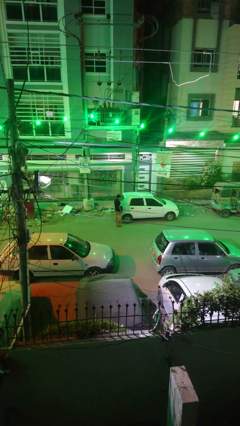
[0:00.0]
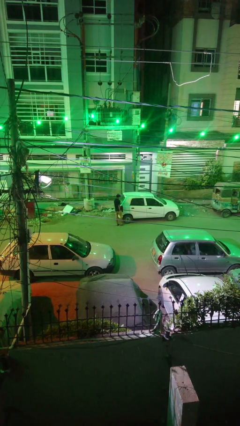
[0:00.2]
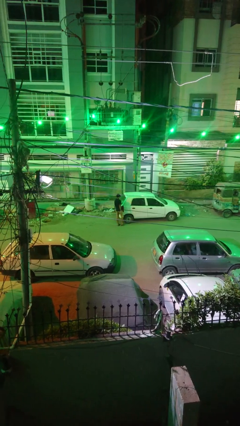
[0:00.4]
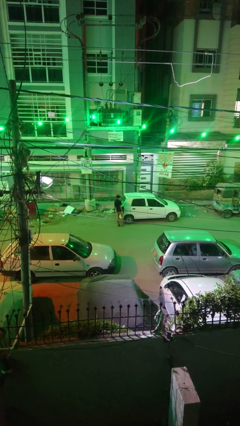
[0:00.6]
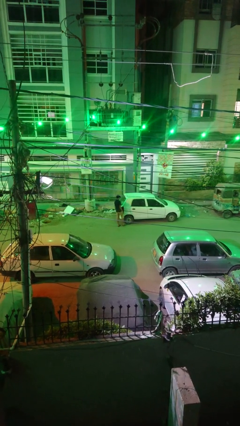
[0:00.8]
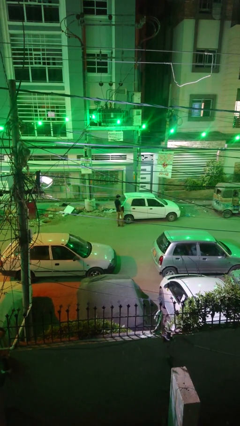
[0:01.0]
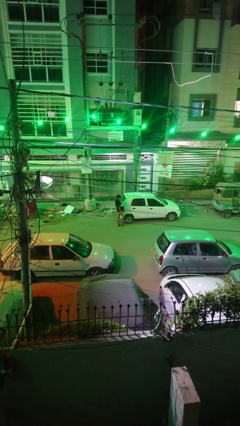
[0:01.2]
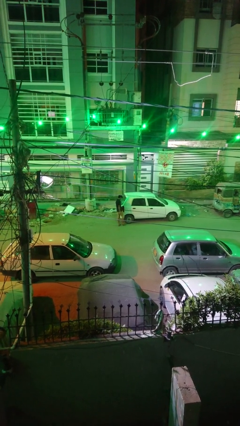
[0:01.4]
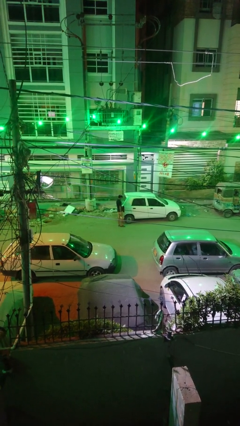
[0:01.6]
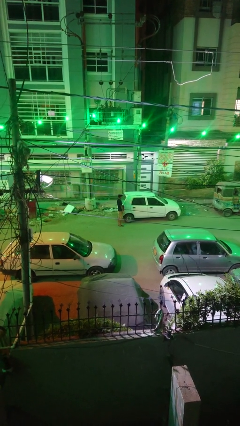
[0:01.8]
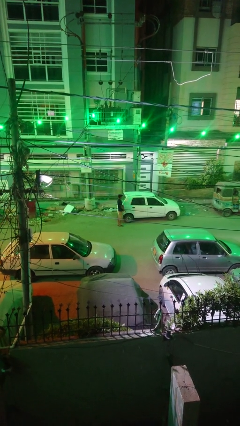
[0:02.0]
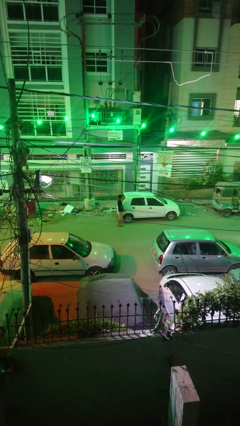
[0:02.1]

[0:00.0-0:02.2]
person kicks car tires

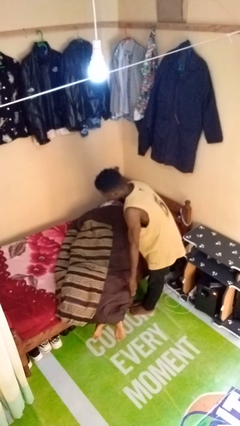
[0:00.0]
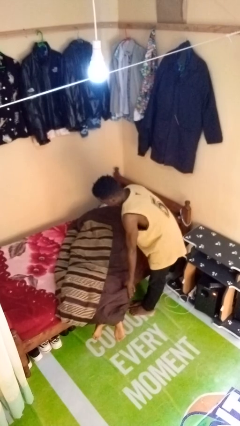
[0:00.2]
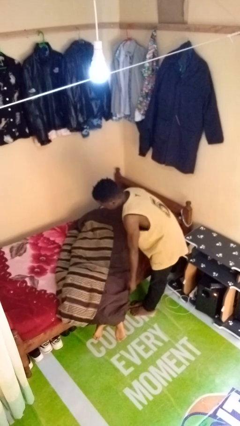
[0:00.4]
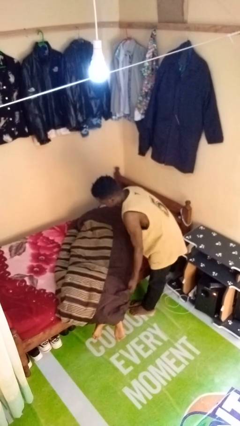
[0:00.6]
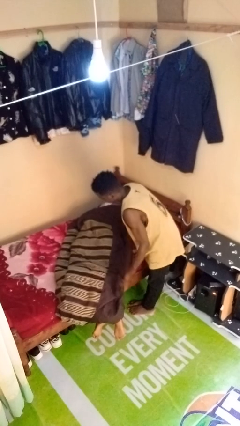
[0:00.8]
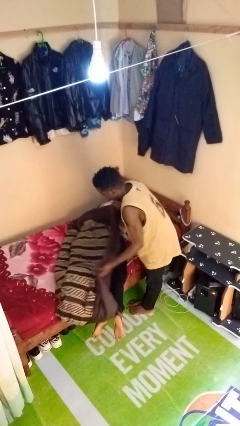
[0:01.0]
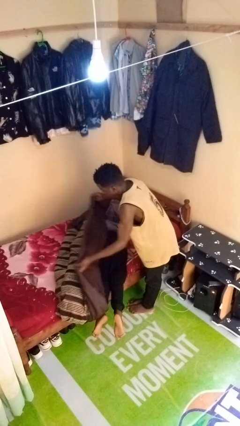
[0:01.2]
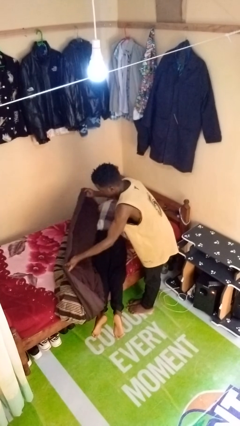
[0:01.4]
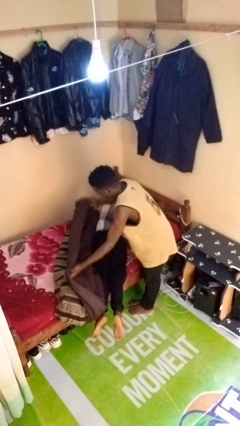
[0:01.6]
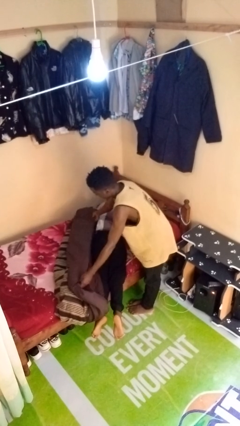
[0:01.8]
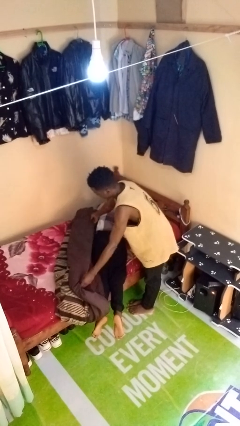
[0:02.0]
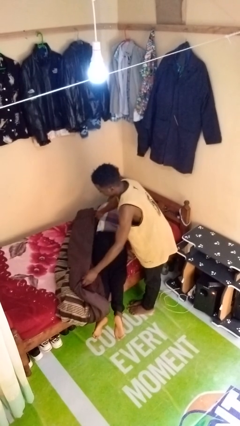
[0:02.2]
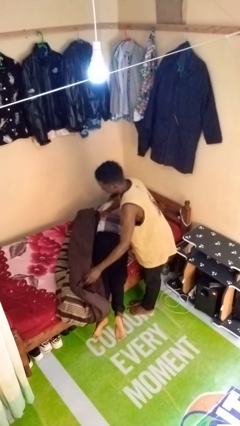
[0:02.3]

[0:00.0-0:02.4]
person uncovers friend with blanket

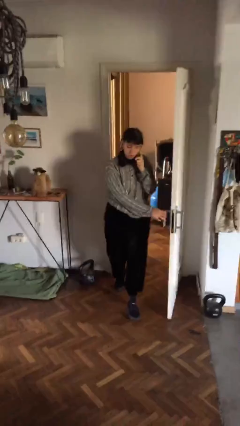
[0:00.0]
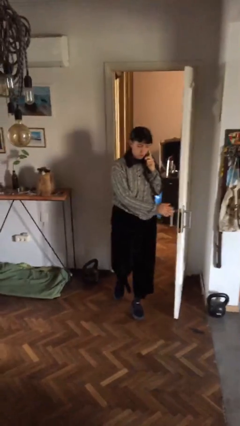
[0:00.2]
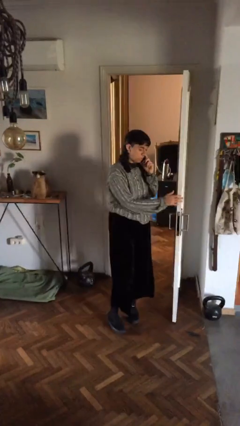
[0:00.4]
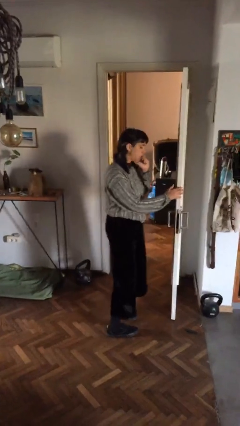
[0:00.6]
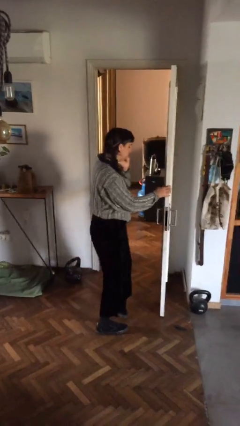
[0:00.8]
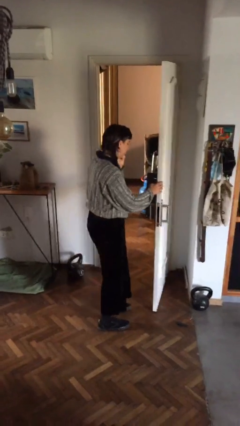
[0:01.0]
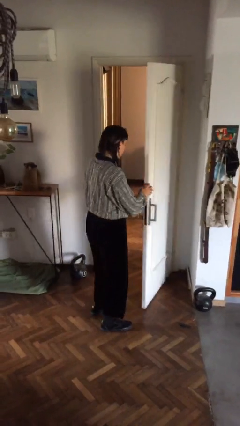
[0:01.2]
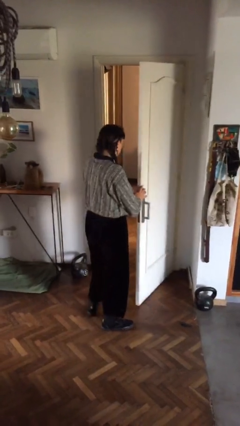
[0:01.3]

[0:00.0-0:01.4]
person enters scene through structure

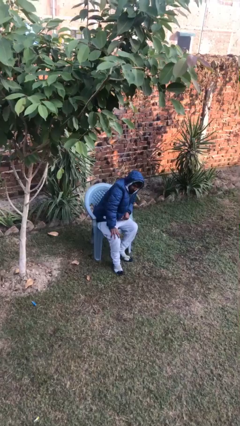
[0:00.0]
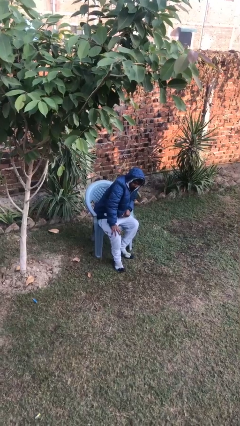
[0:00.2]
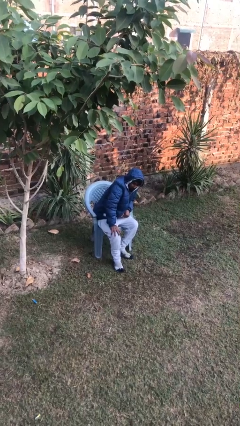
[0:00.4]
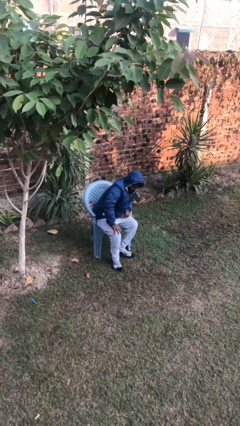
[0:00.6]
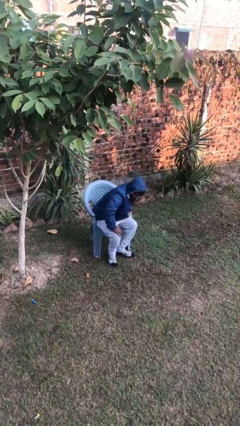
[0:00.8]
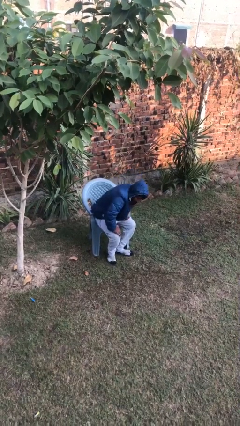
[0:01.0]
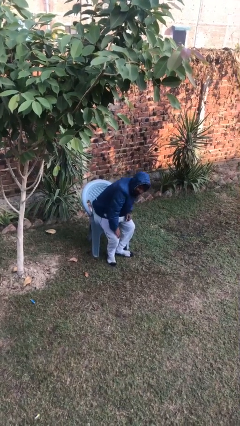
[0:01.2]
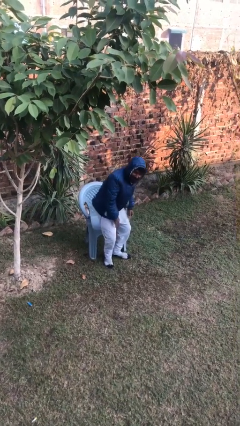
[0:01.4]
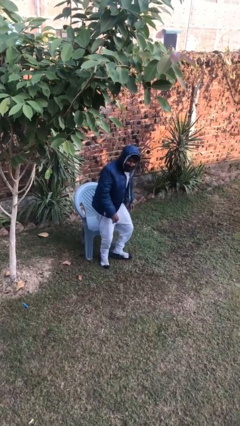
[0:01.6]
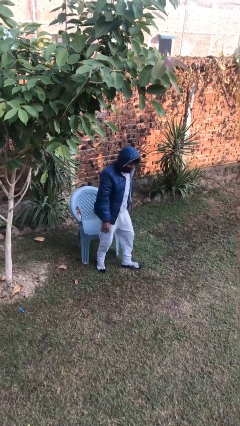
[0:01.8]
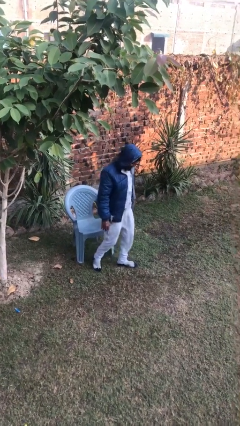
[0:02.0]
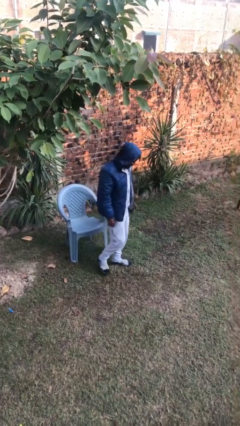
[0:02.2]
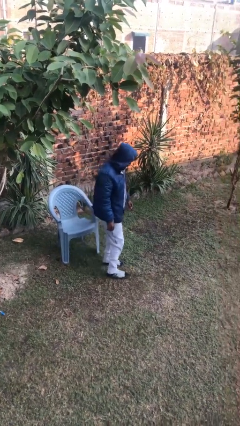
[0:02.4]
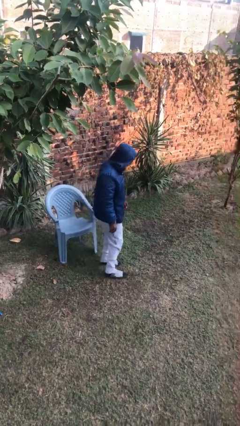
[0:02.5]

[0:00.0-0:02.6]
person stands up

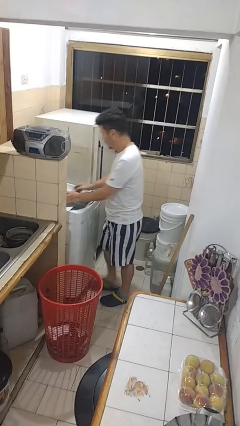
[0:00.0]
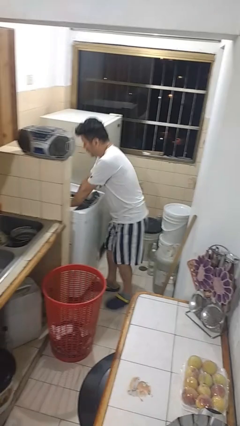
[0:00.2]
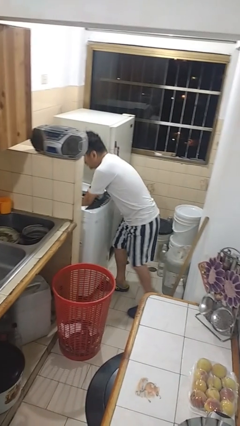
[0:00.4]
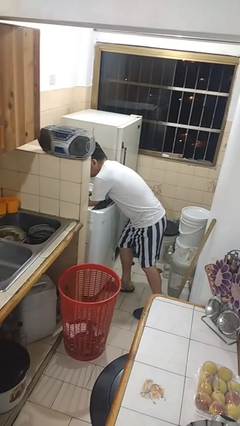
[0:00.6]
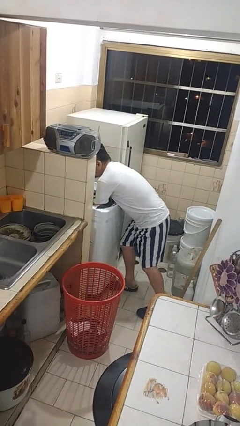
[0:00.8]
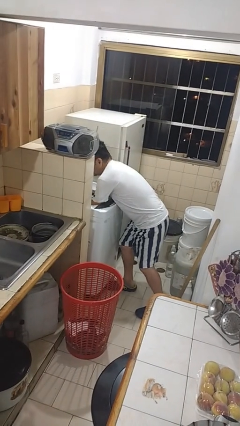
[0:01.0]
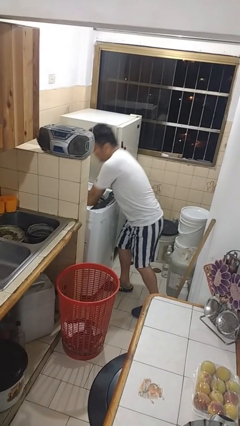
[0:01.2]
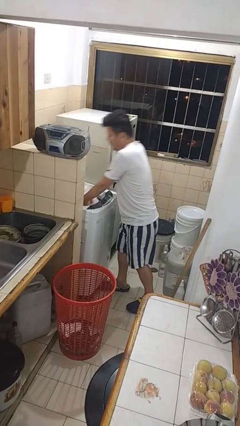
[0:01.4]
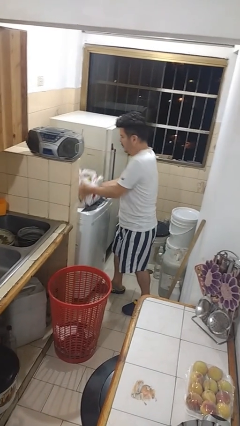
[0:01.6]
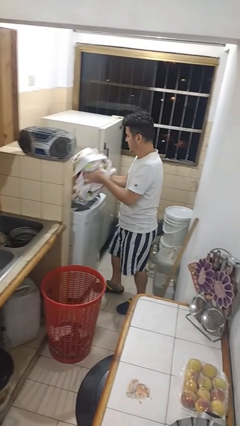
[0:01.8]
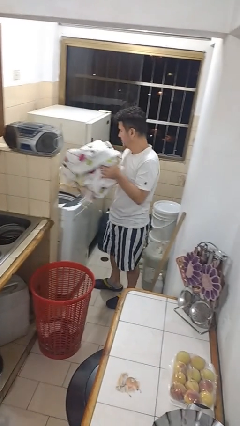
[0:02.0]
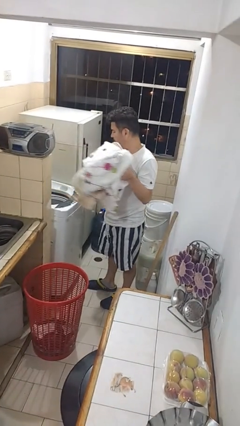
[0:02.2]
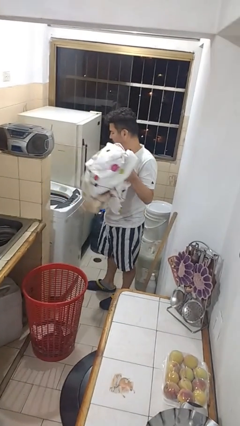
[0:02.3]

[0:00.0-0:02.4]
person unloads clotheswasher

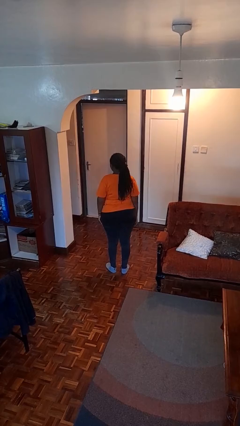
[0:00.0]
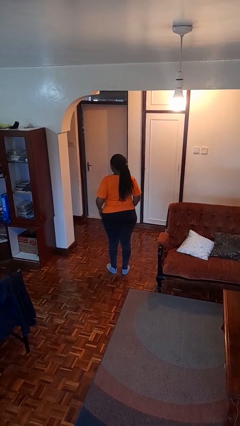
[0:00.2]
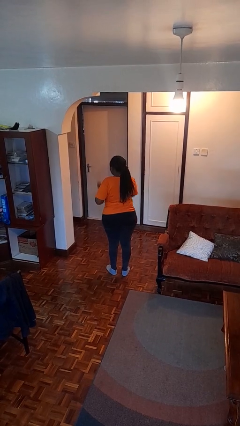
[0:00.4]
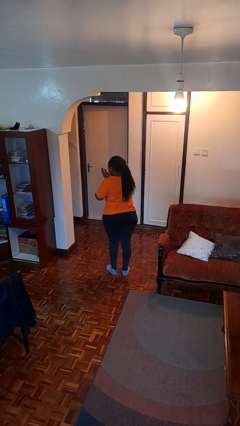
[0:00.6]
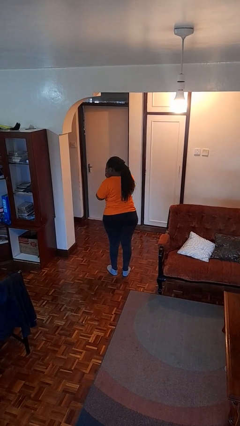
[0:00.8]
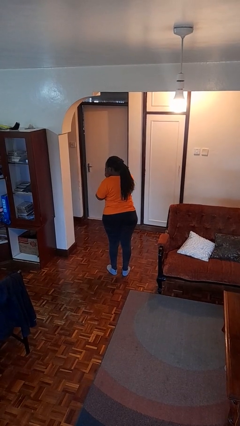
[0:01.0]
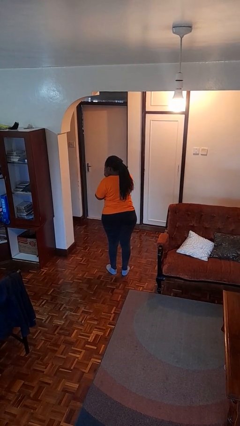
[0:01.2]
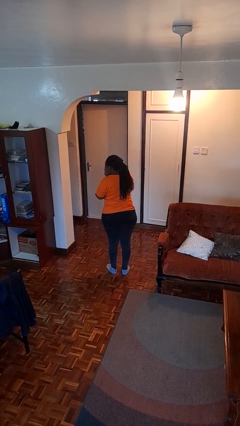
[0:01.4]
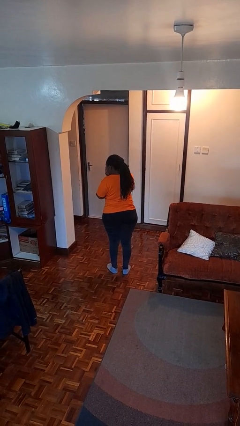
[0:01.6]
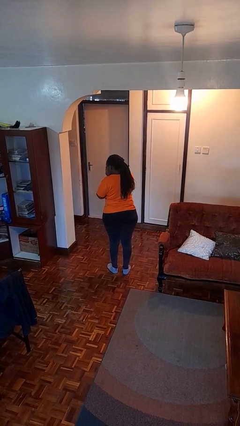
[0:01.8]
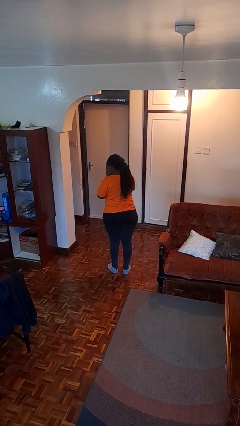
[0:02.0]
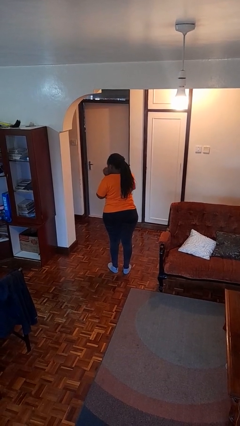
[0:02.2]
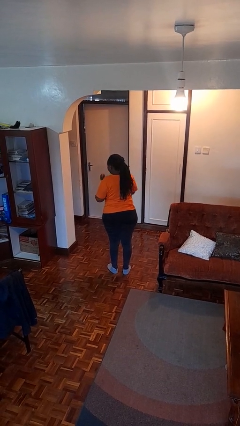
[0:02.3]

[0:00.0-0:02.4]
person sneezes into hand

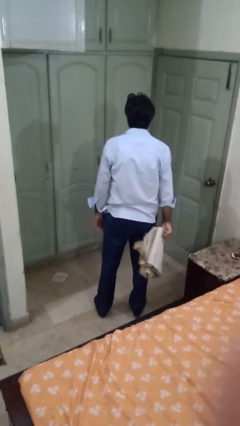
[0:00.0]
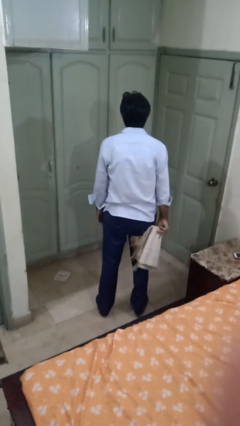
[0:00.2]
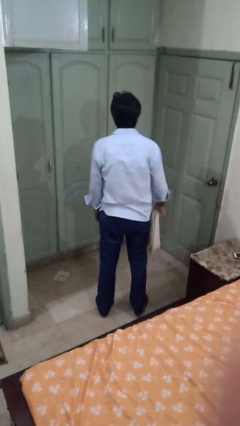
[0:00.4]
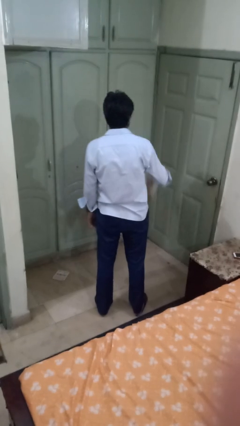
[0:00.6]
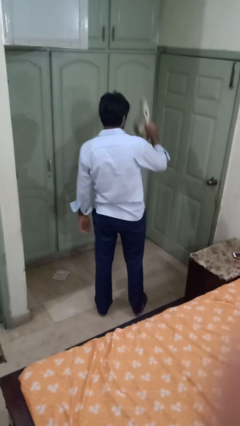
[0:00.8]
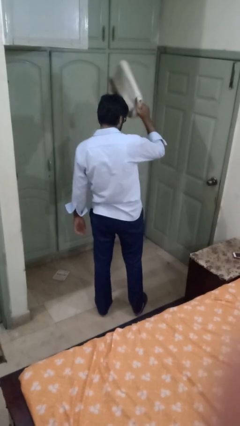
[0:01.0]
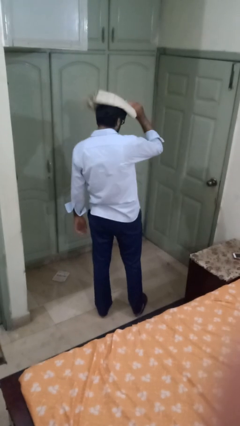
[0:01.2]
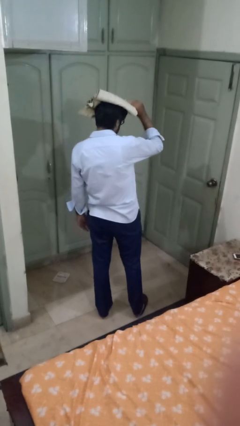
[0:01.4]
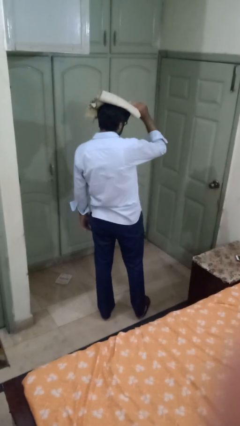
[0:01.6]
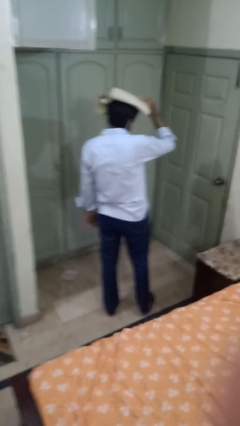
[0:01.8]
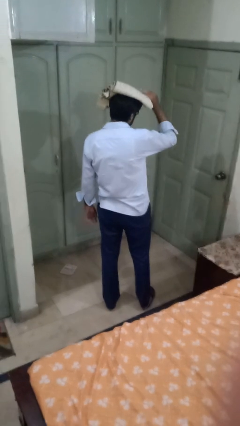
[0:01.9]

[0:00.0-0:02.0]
person holds object above head

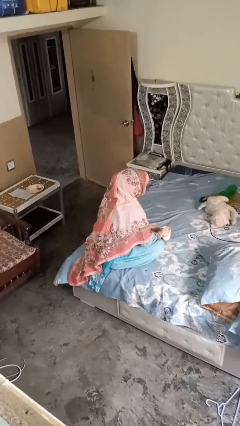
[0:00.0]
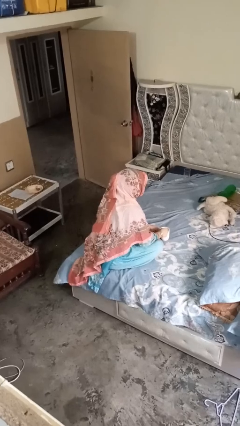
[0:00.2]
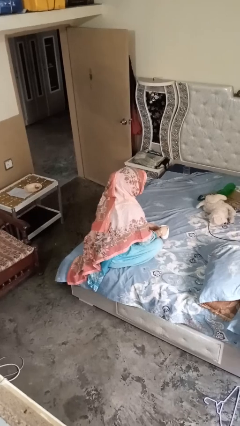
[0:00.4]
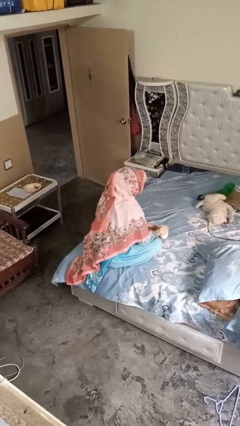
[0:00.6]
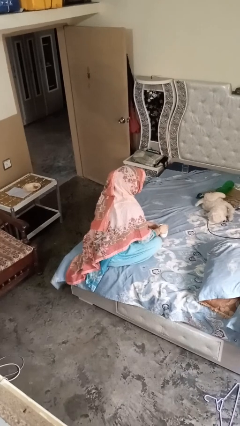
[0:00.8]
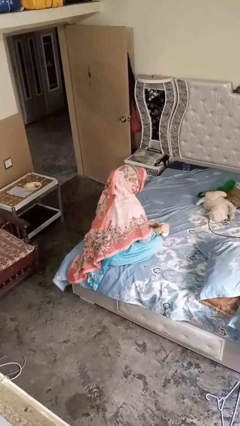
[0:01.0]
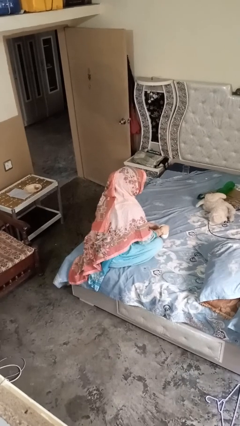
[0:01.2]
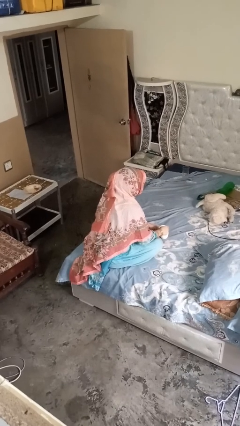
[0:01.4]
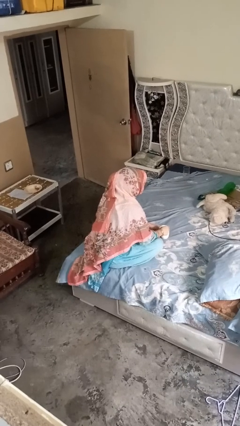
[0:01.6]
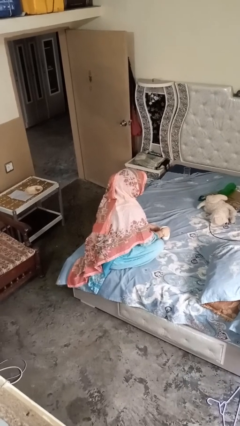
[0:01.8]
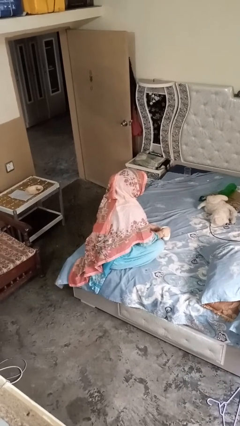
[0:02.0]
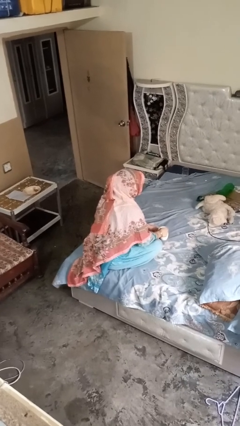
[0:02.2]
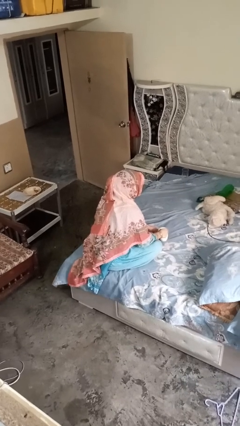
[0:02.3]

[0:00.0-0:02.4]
person stirs mug
